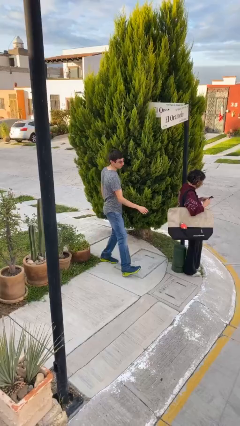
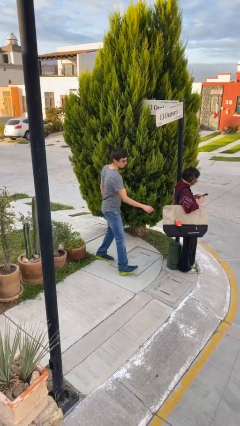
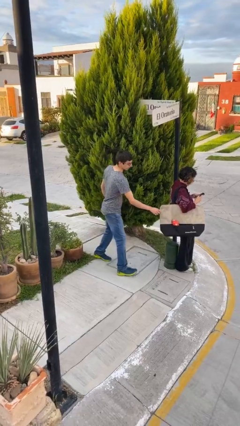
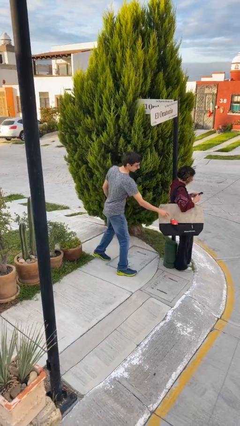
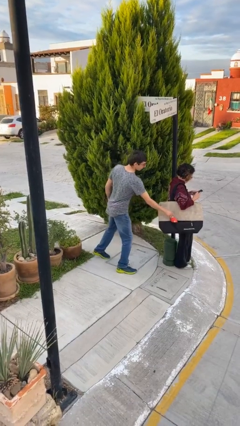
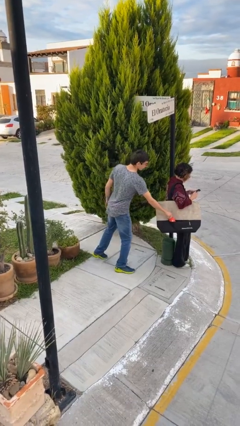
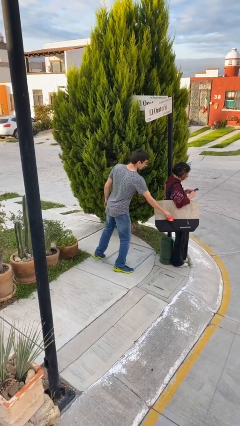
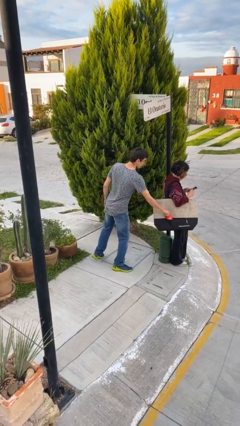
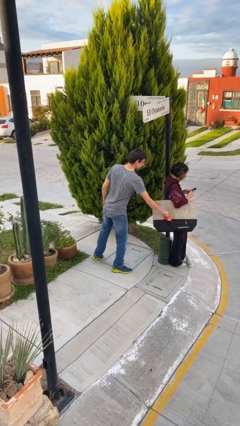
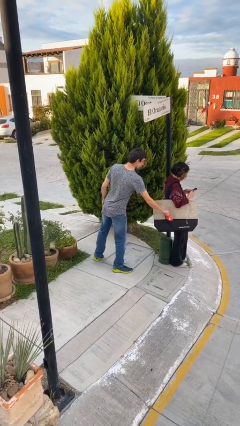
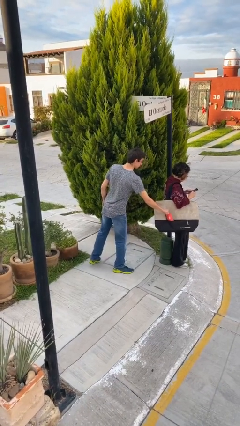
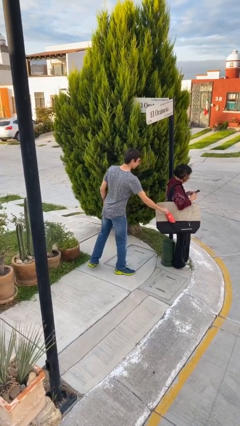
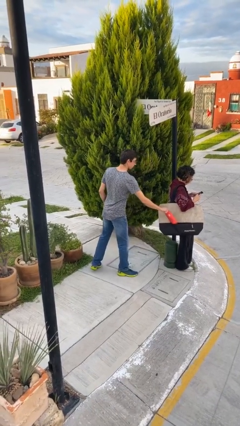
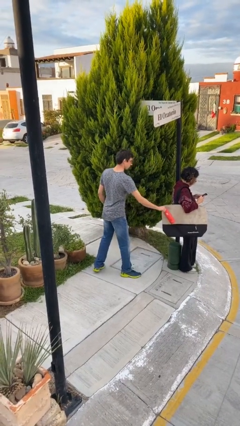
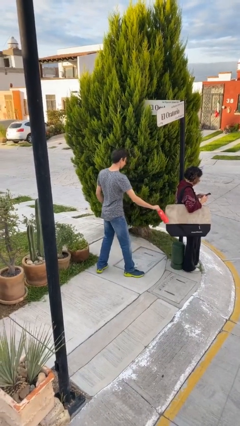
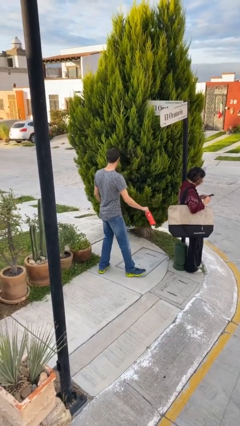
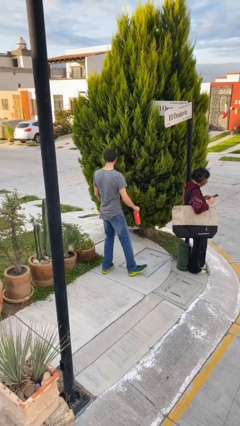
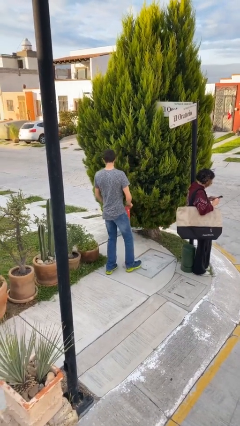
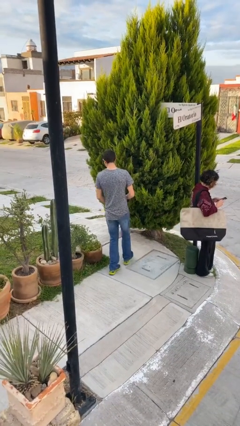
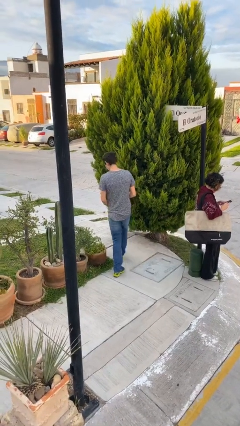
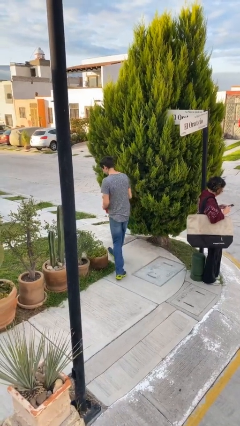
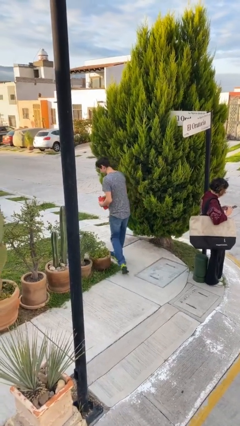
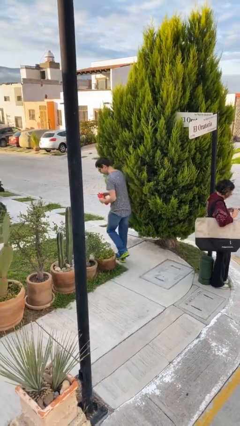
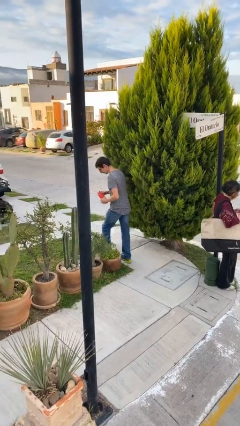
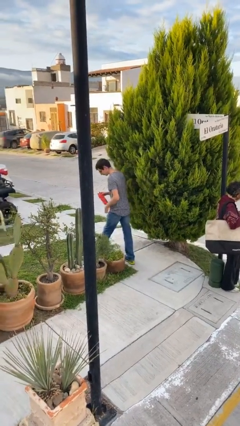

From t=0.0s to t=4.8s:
person steals object from person

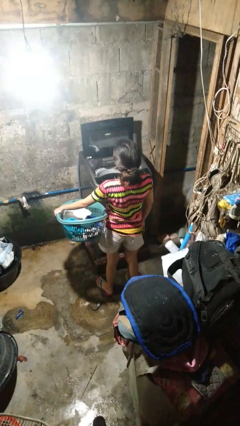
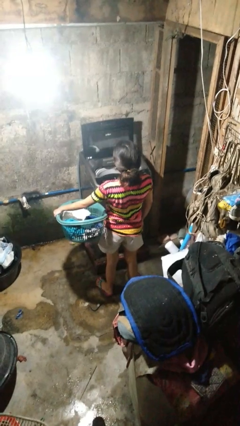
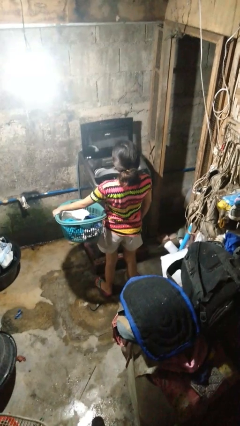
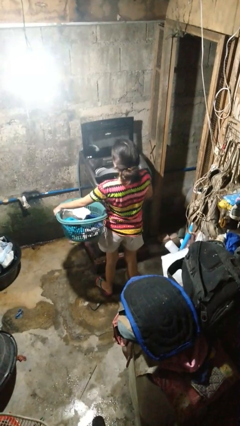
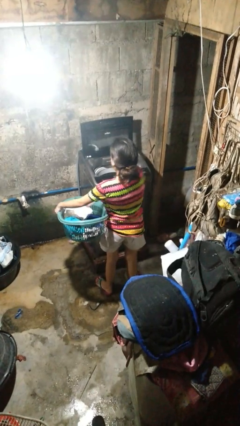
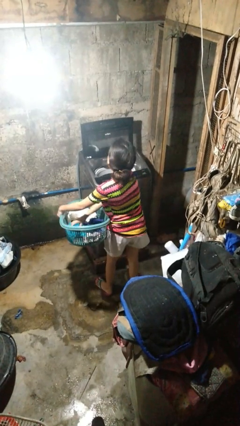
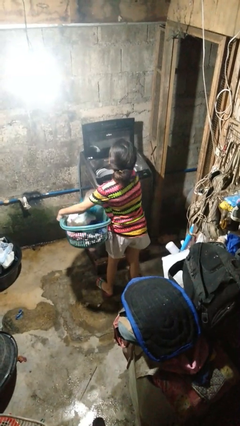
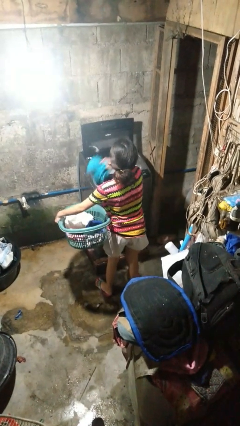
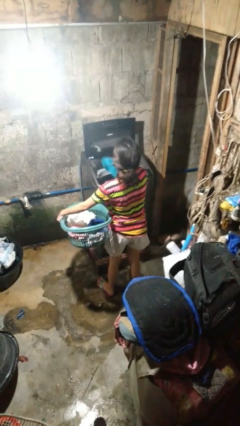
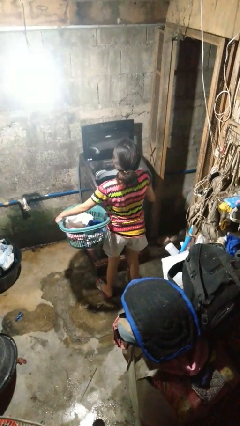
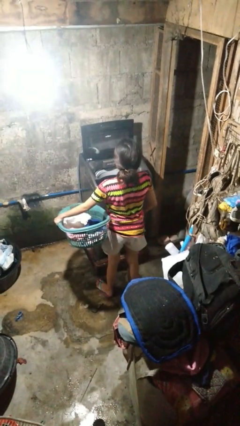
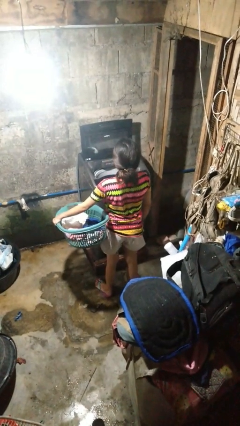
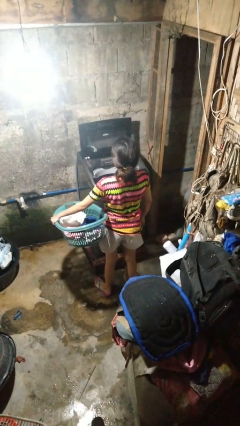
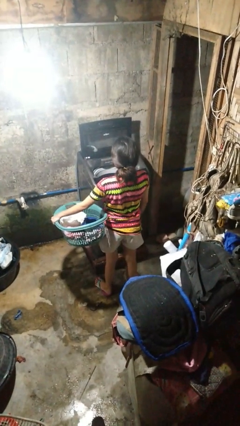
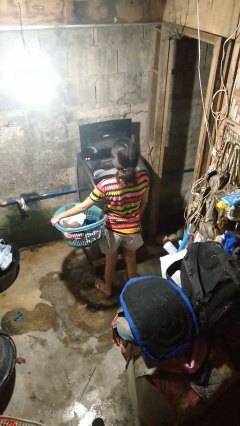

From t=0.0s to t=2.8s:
person loads clotheswasher

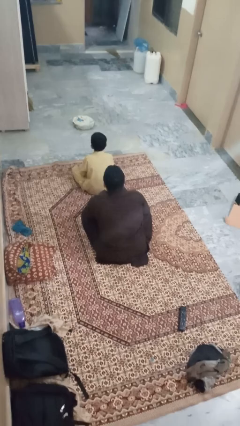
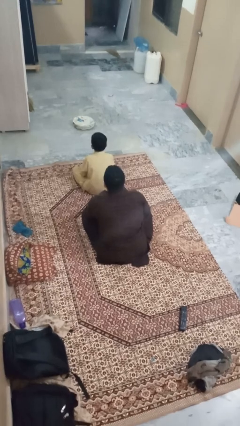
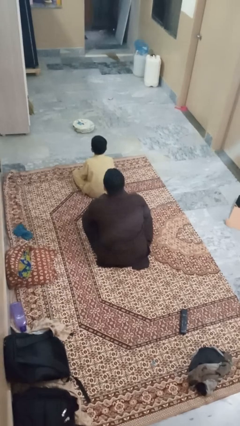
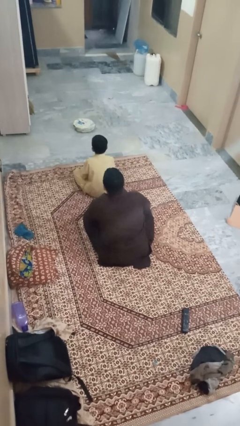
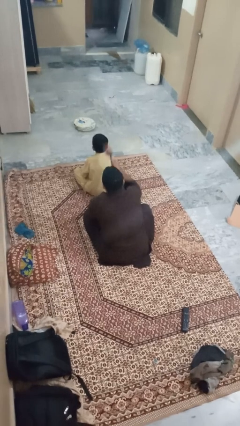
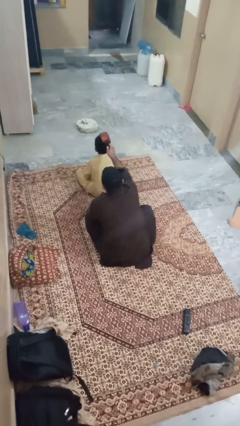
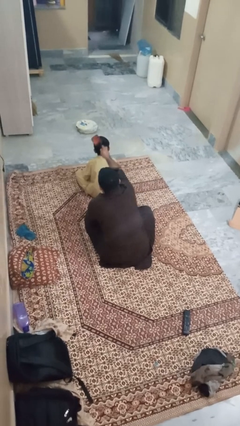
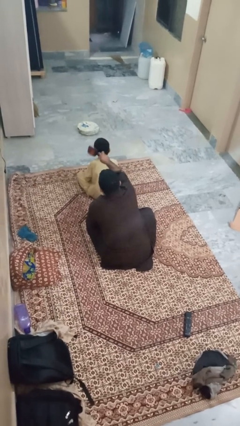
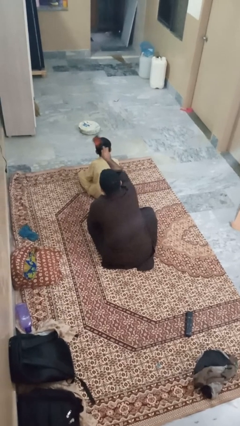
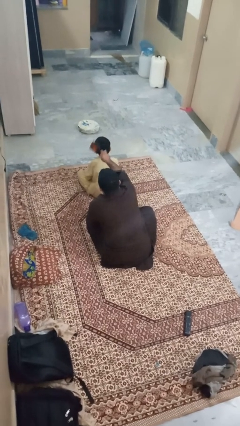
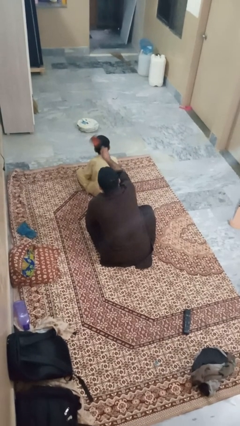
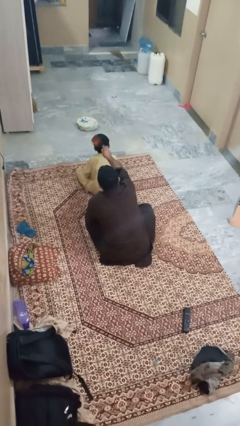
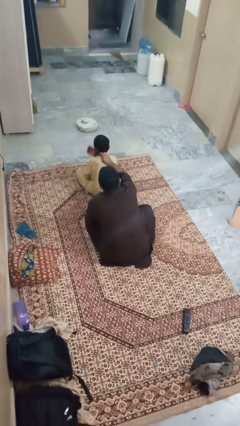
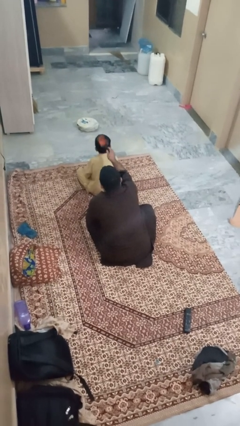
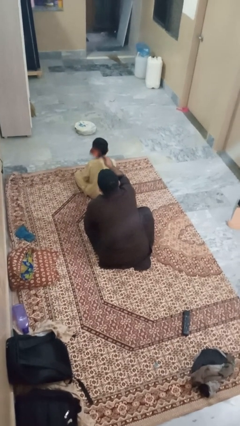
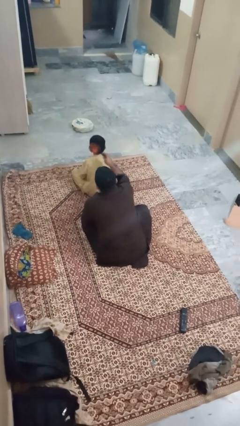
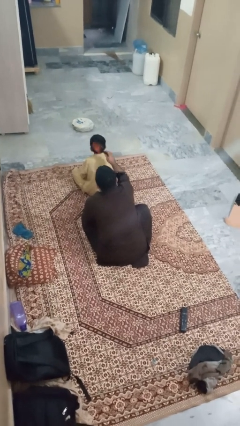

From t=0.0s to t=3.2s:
person brushes hair of person

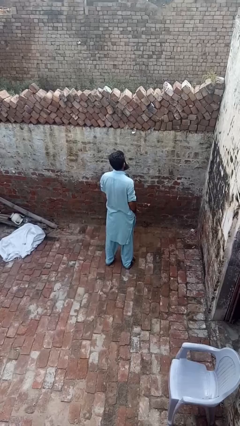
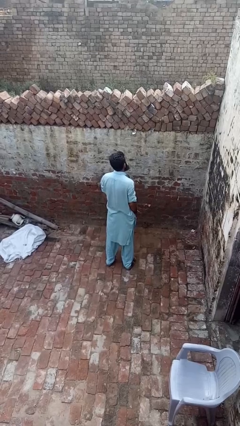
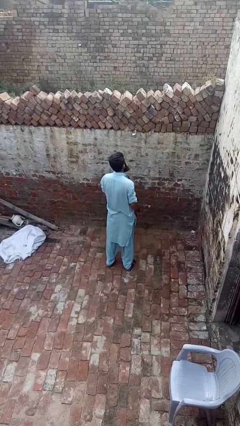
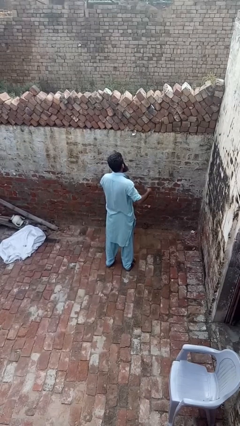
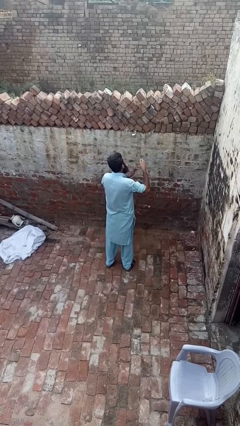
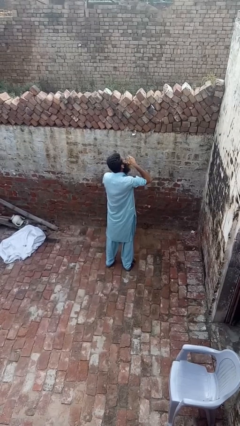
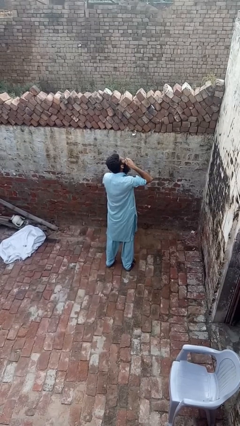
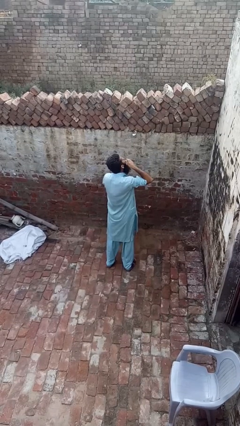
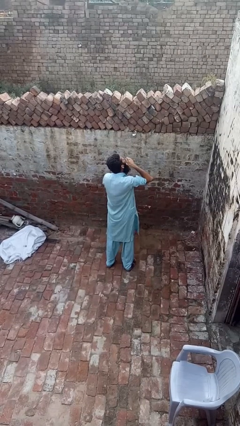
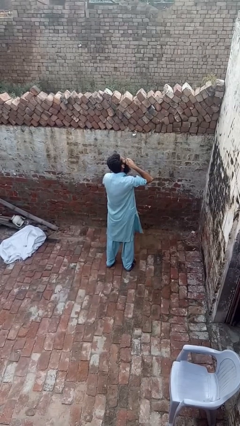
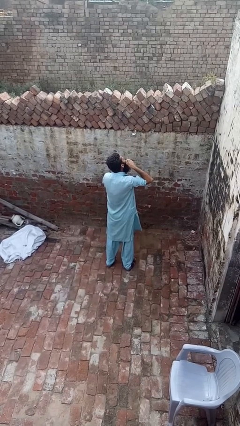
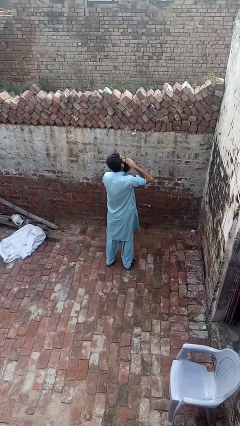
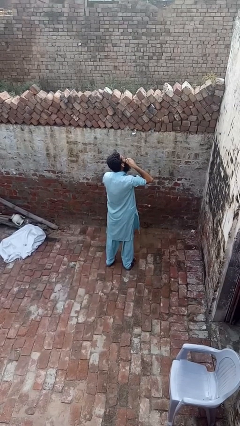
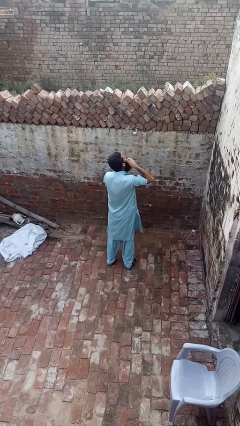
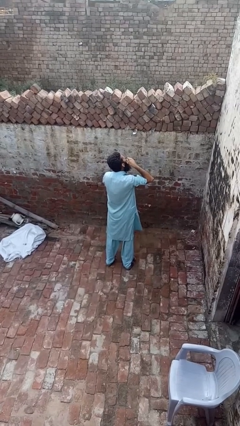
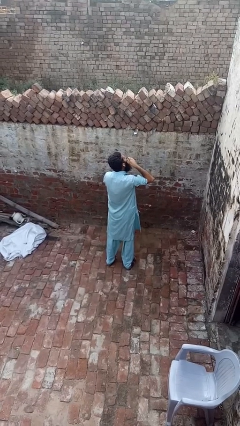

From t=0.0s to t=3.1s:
person flosses

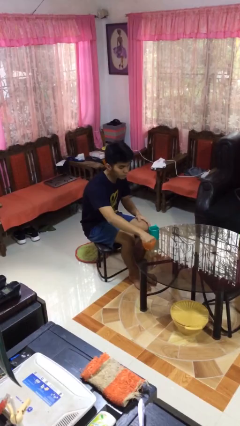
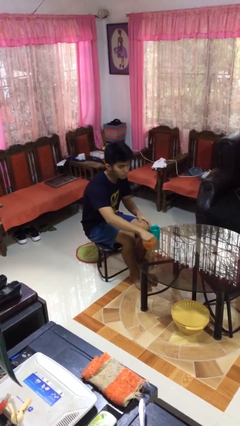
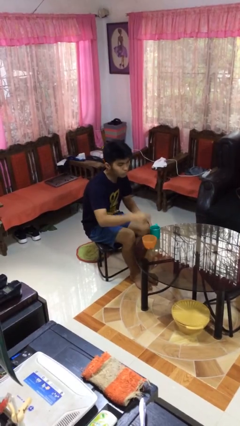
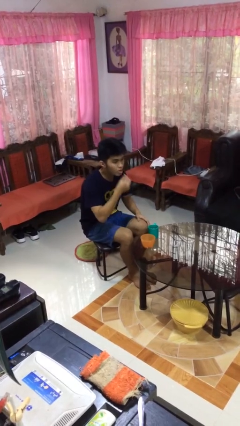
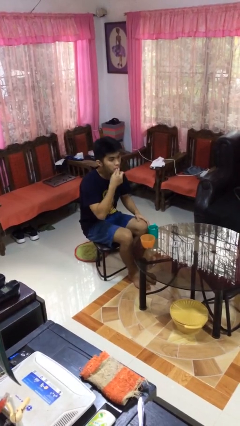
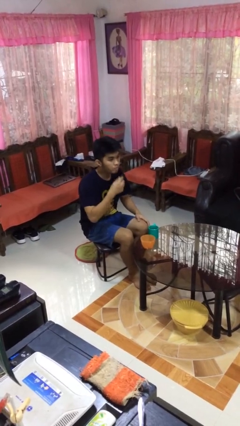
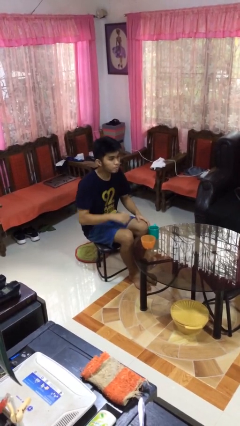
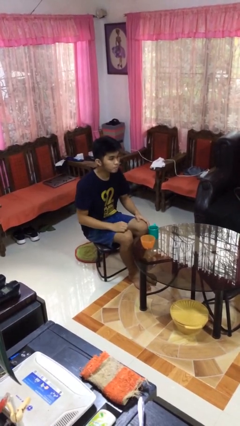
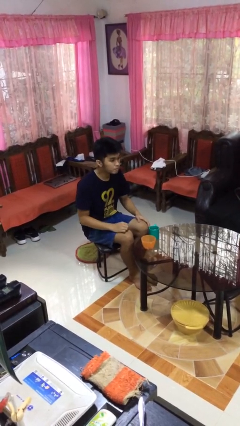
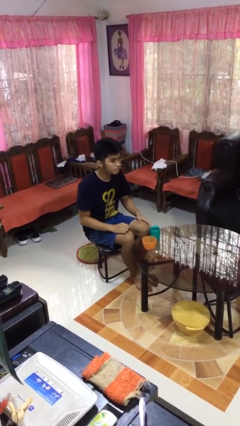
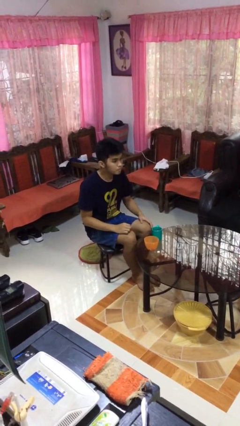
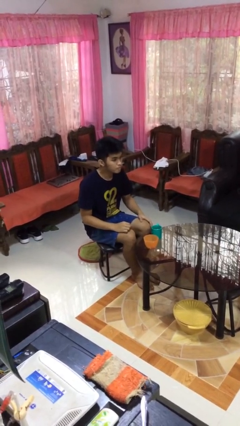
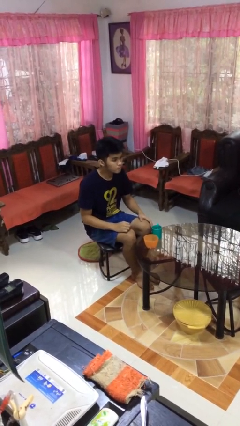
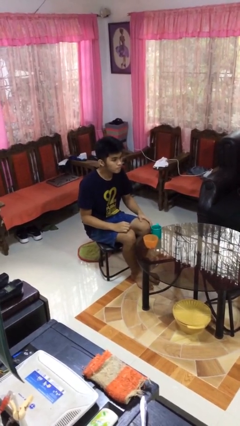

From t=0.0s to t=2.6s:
person takes medicine pills

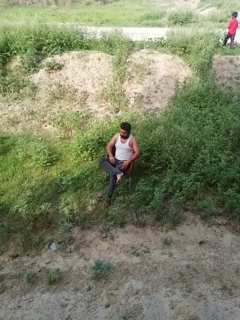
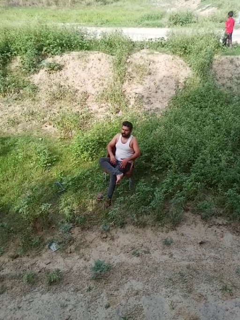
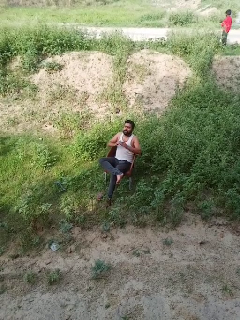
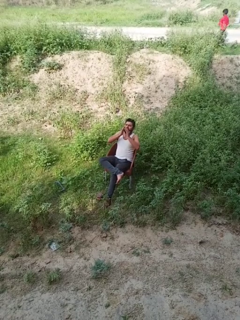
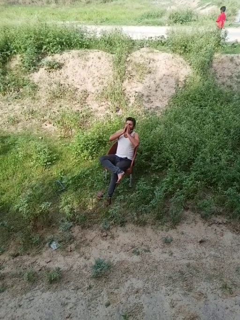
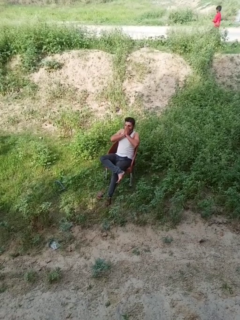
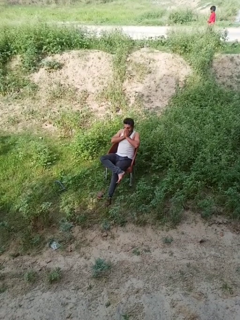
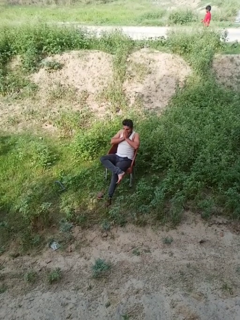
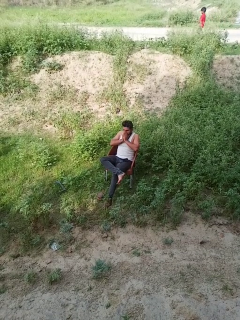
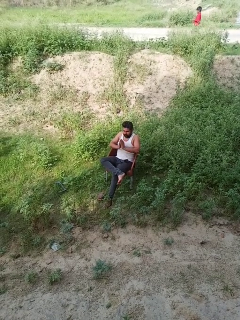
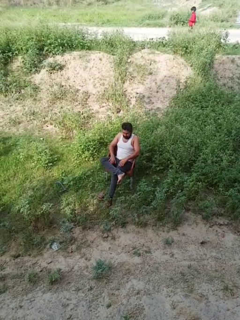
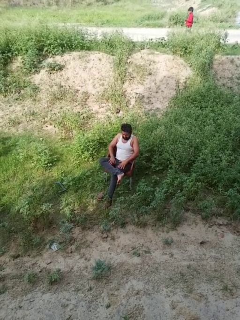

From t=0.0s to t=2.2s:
person sneezes into hand
